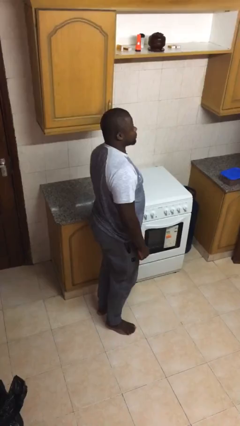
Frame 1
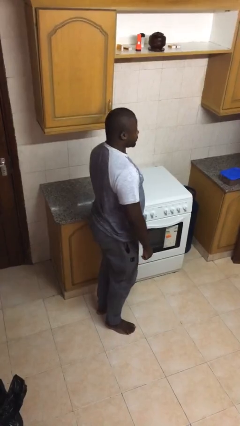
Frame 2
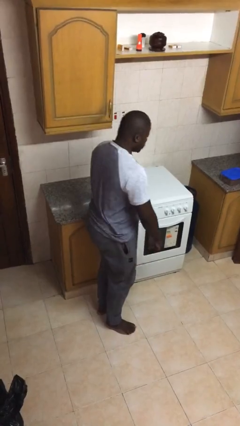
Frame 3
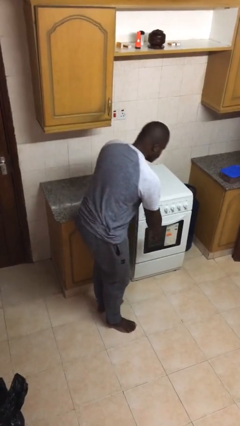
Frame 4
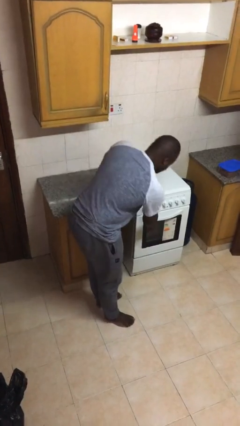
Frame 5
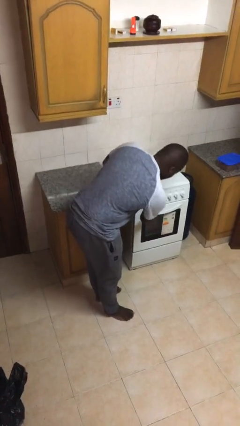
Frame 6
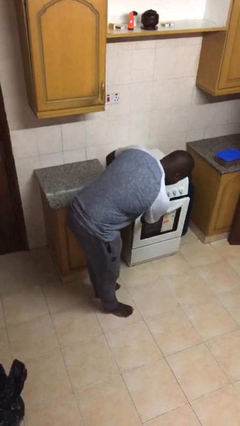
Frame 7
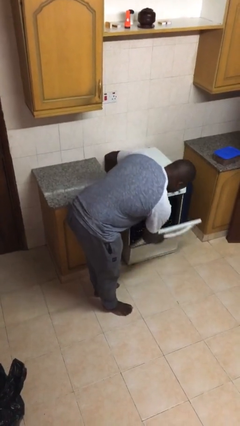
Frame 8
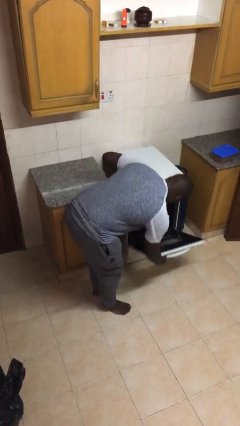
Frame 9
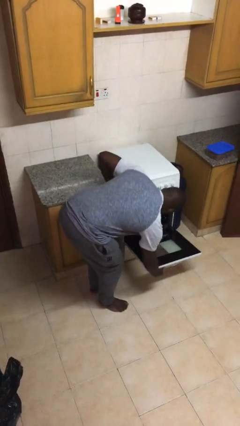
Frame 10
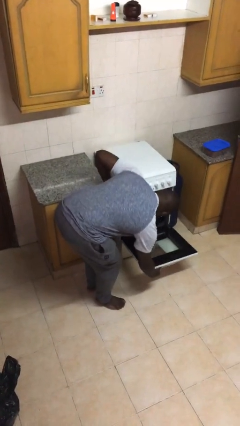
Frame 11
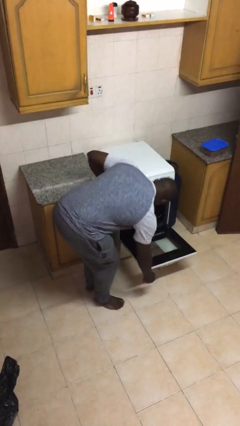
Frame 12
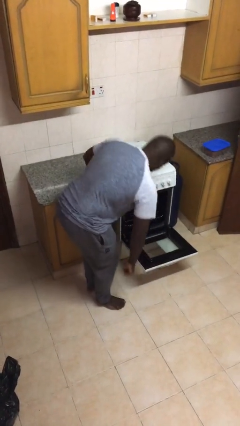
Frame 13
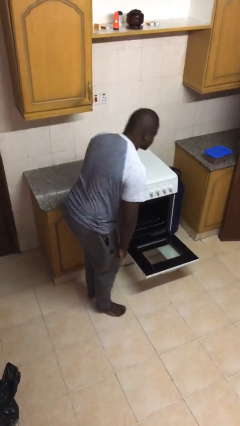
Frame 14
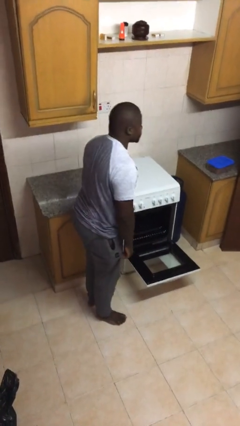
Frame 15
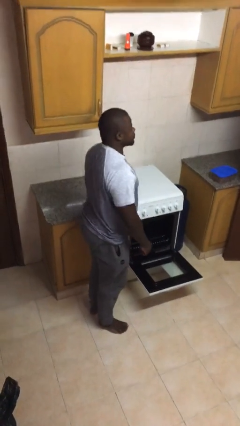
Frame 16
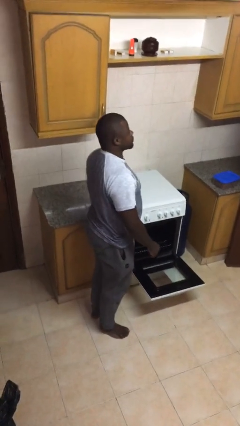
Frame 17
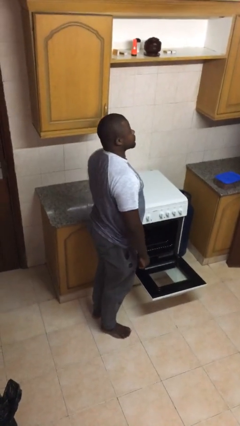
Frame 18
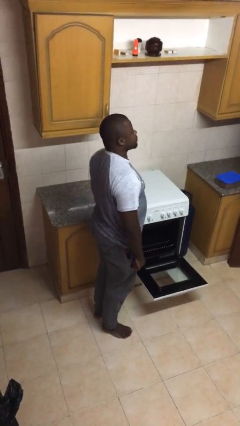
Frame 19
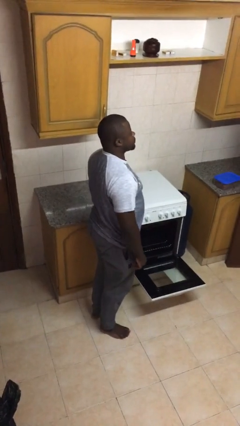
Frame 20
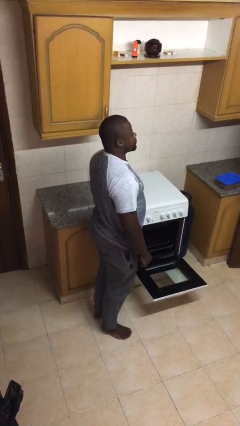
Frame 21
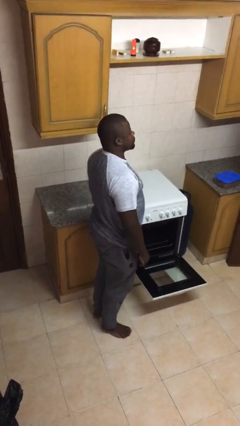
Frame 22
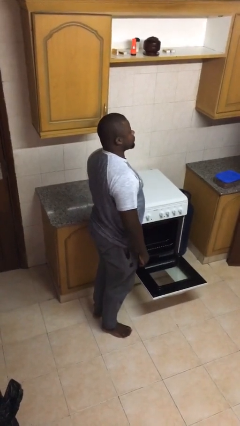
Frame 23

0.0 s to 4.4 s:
person opens oven door

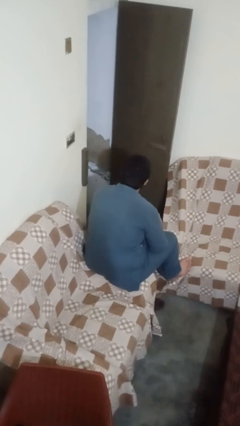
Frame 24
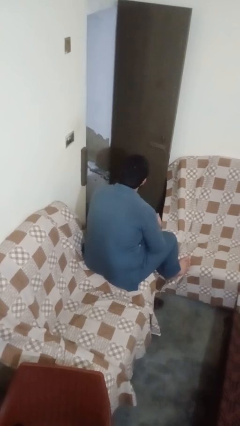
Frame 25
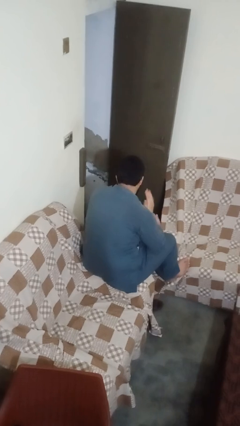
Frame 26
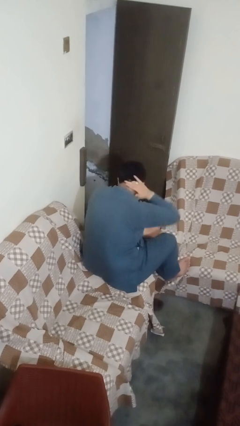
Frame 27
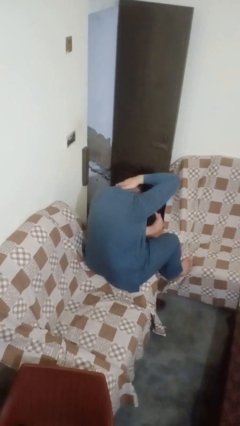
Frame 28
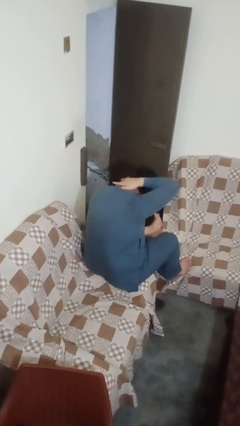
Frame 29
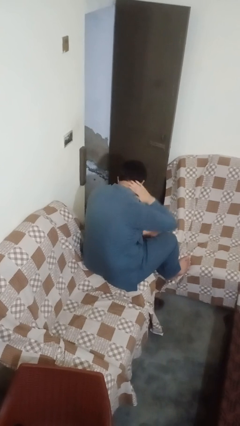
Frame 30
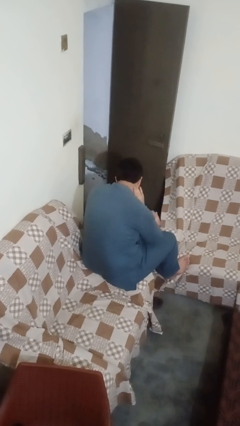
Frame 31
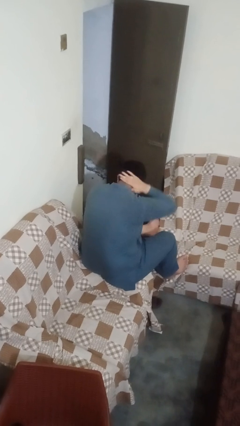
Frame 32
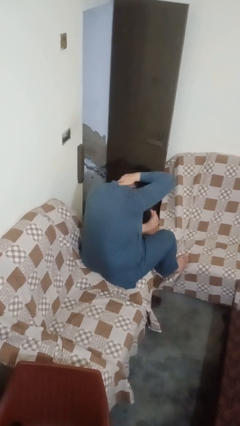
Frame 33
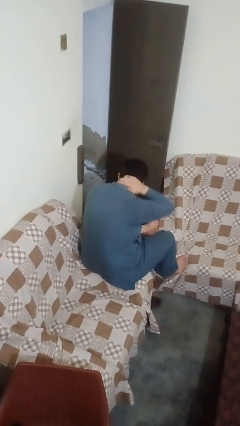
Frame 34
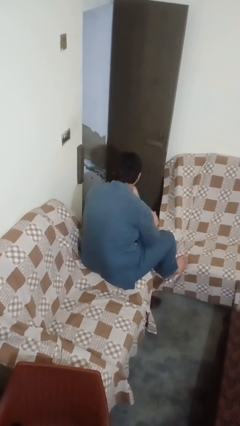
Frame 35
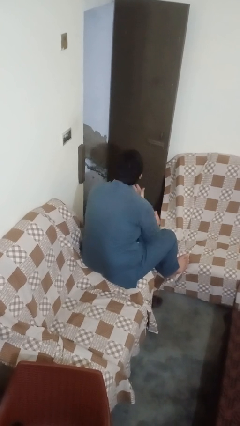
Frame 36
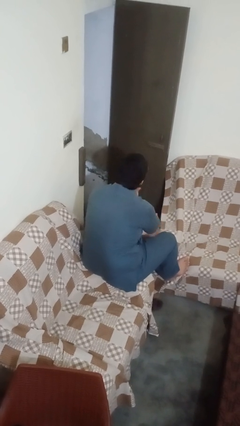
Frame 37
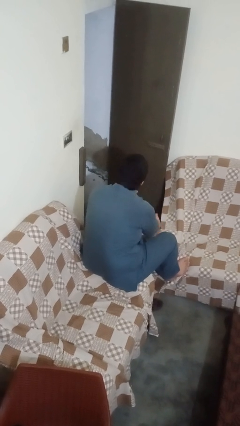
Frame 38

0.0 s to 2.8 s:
person rubs neck

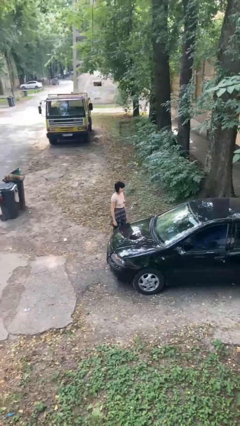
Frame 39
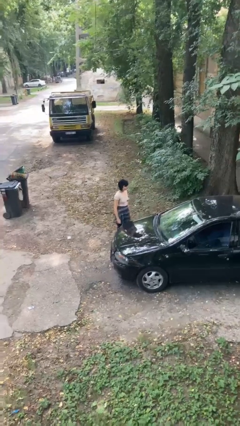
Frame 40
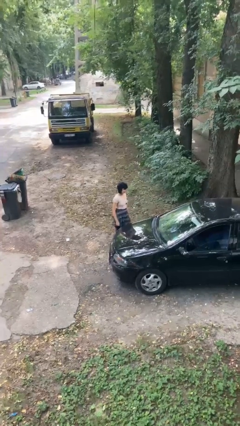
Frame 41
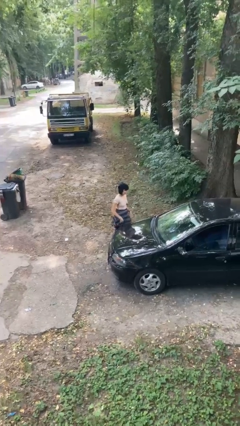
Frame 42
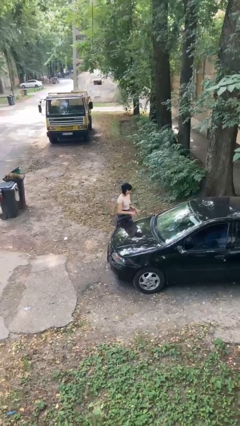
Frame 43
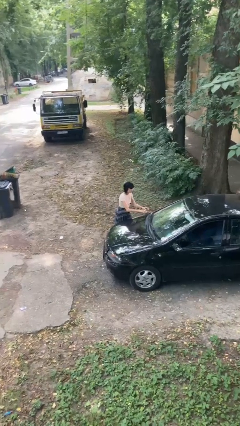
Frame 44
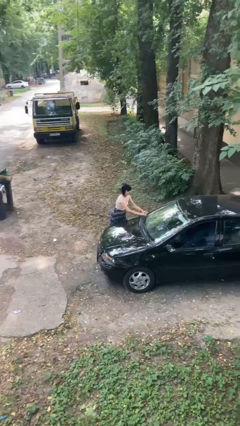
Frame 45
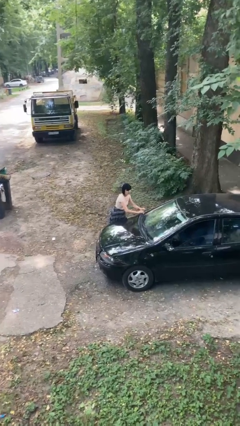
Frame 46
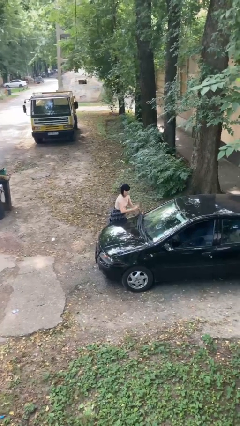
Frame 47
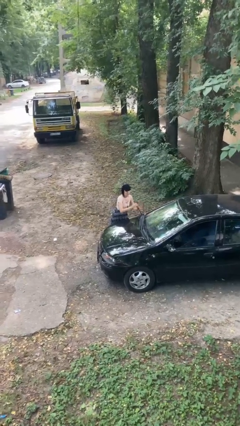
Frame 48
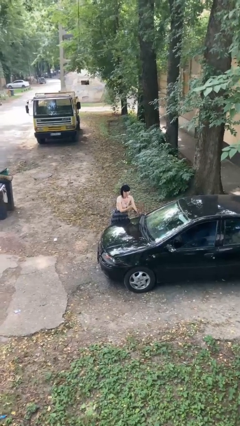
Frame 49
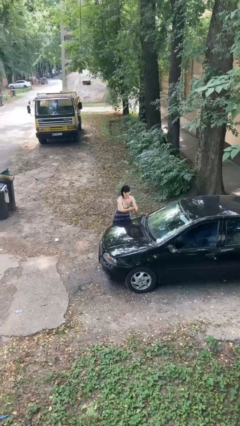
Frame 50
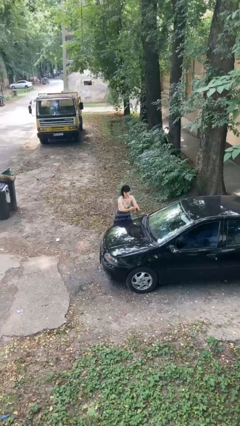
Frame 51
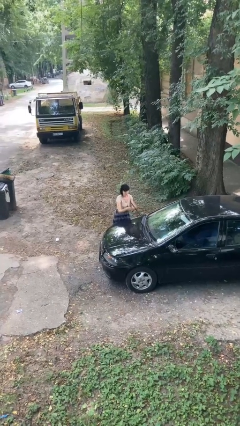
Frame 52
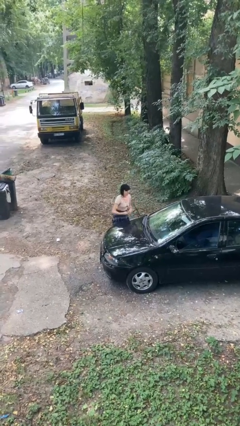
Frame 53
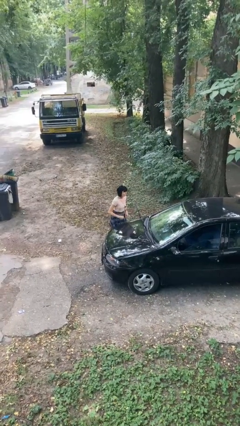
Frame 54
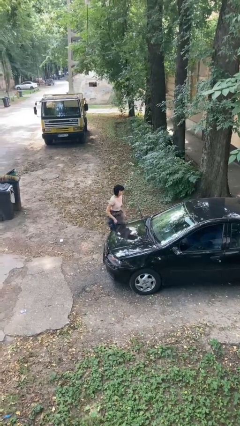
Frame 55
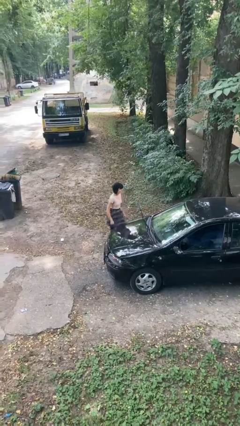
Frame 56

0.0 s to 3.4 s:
person flips up car wipers

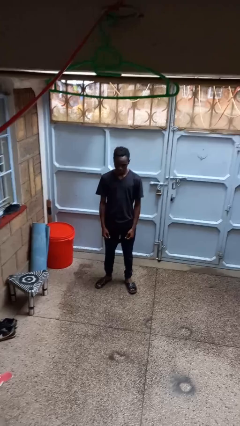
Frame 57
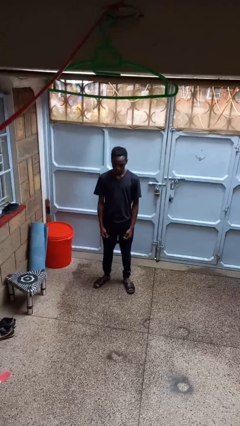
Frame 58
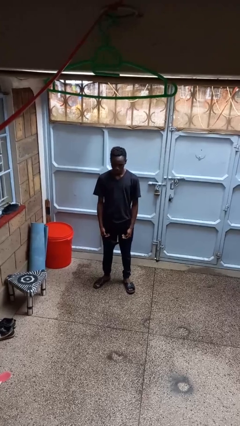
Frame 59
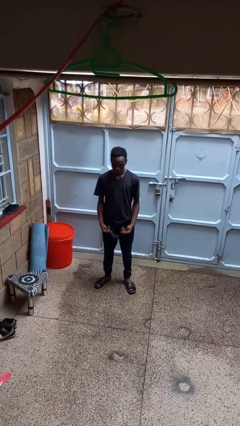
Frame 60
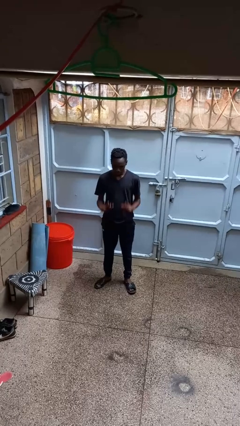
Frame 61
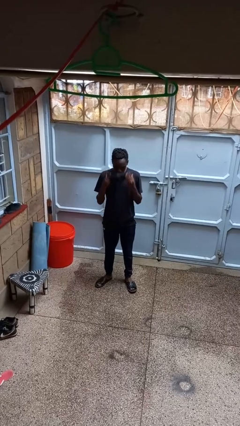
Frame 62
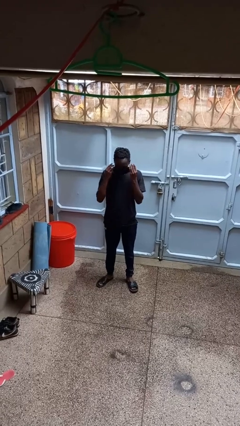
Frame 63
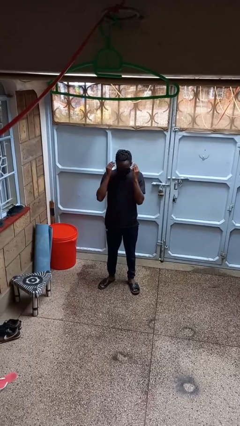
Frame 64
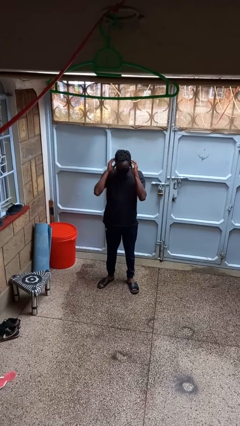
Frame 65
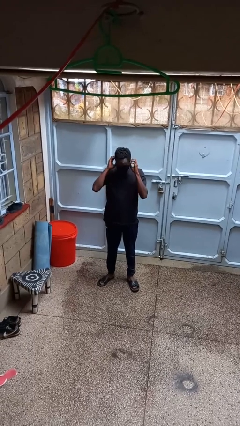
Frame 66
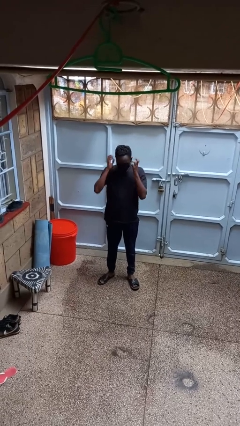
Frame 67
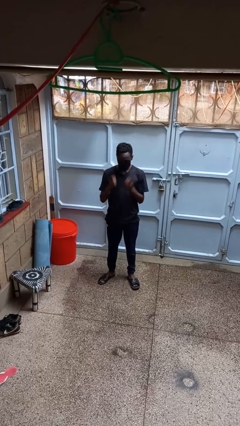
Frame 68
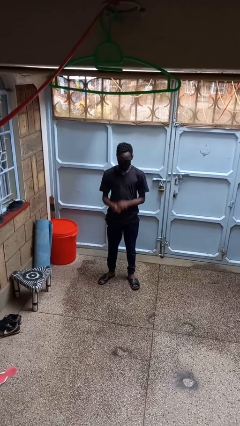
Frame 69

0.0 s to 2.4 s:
person puts on facemask

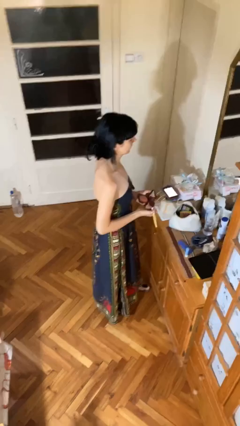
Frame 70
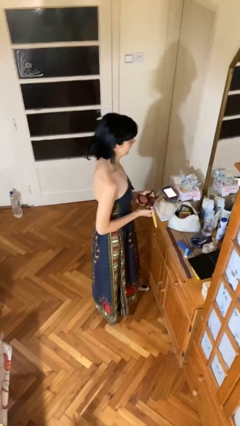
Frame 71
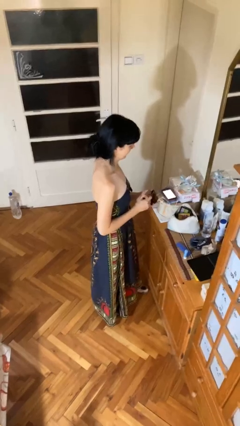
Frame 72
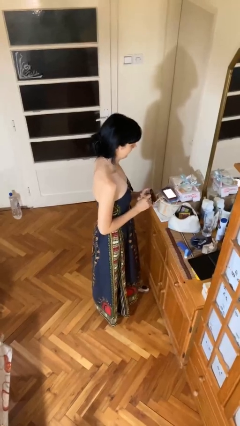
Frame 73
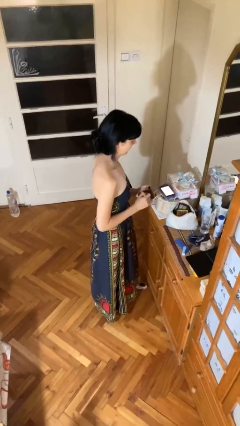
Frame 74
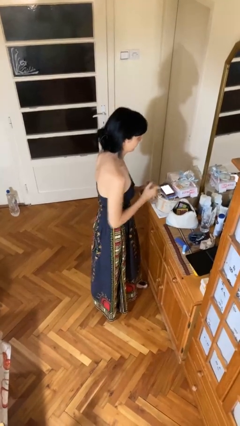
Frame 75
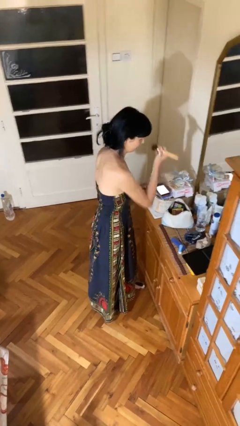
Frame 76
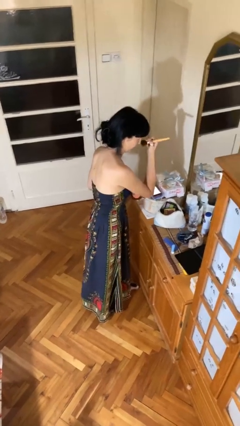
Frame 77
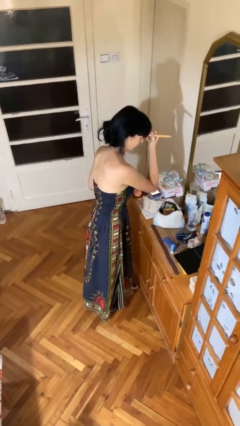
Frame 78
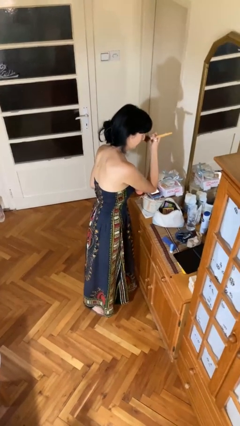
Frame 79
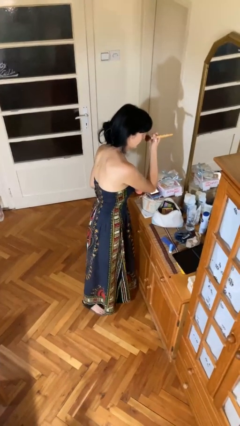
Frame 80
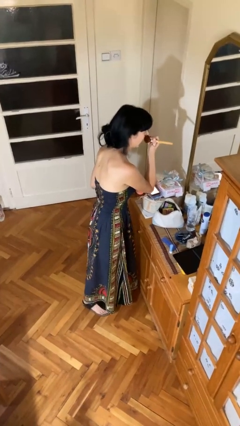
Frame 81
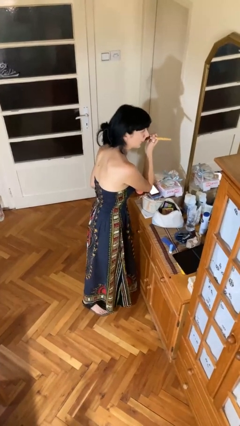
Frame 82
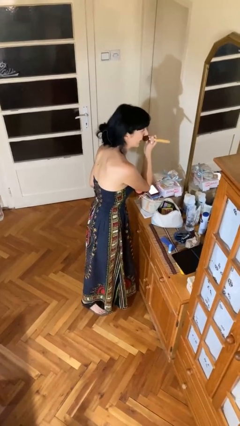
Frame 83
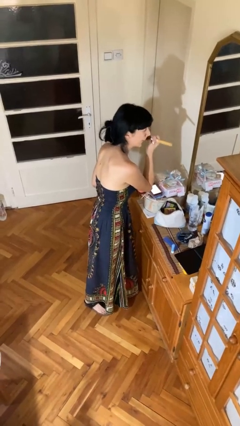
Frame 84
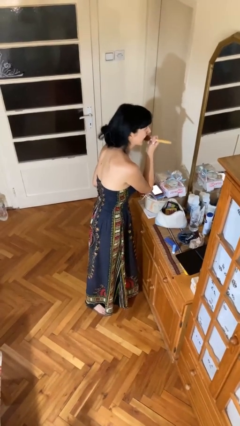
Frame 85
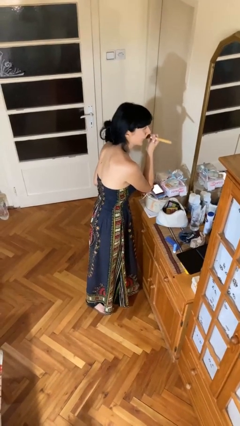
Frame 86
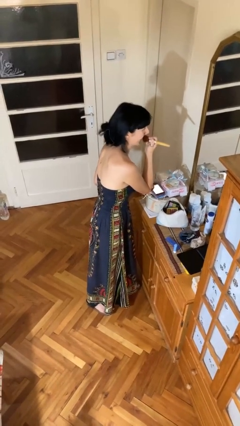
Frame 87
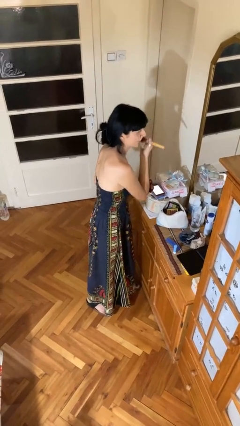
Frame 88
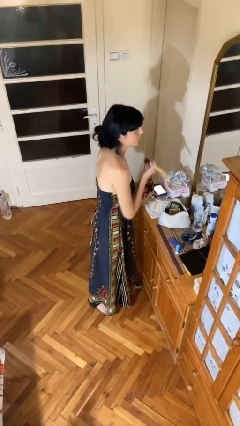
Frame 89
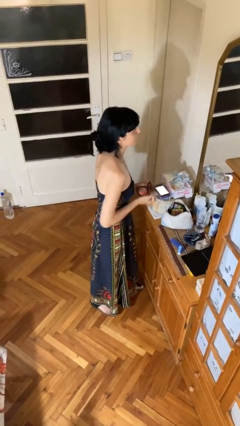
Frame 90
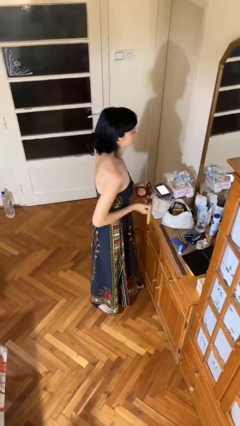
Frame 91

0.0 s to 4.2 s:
person applies foundation makeup

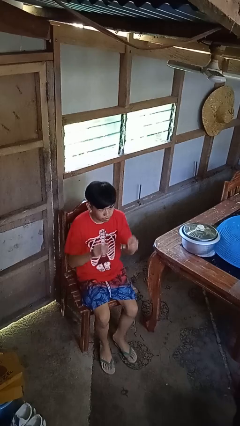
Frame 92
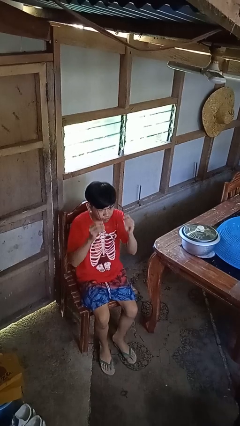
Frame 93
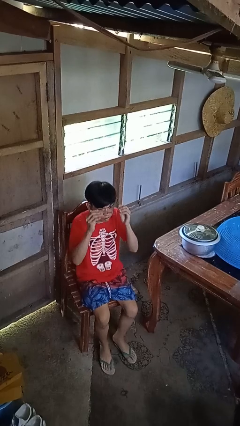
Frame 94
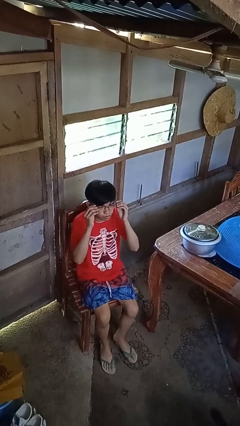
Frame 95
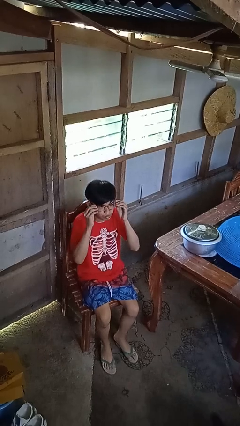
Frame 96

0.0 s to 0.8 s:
person puts on glasses
